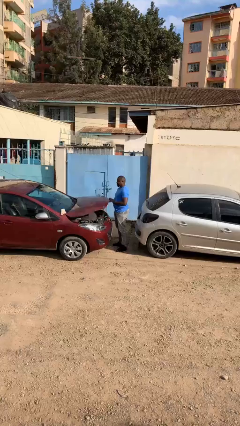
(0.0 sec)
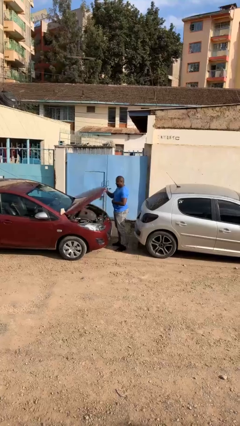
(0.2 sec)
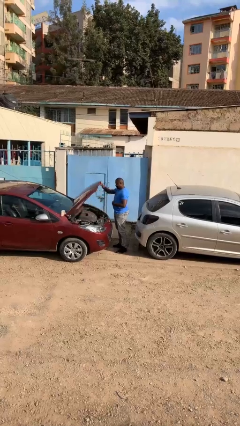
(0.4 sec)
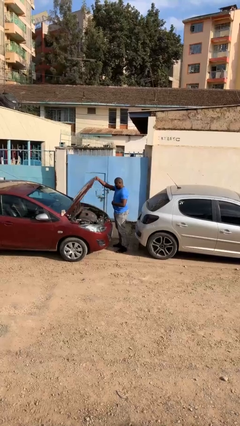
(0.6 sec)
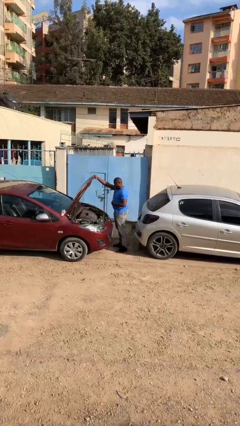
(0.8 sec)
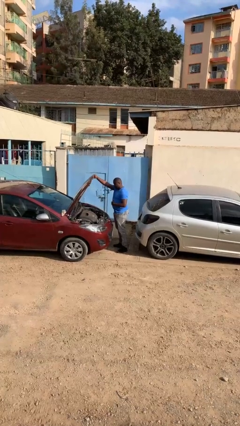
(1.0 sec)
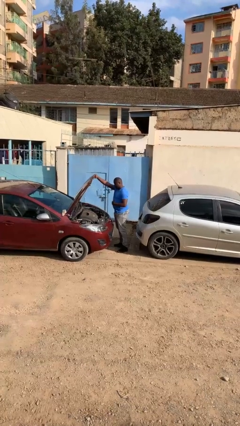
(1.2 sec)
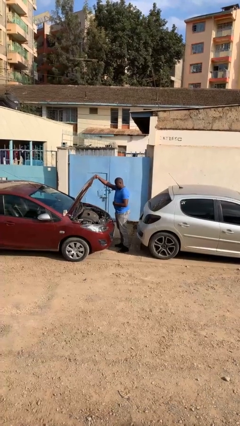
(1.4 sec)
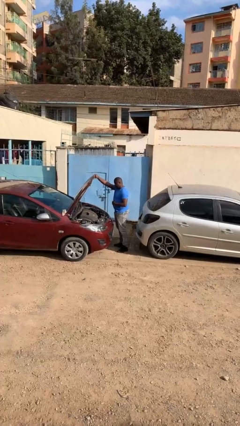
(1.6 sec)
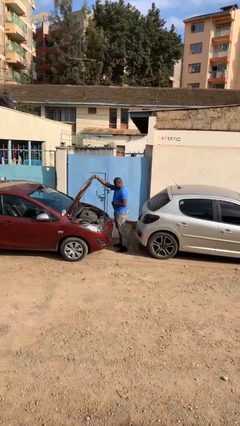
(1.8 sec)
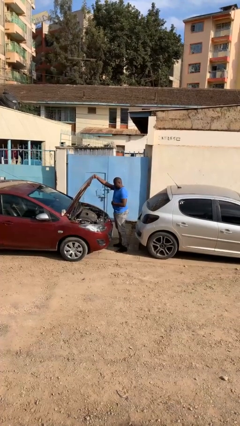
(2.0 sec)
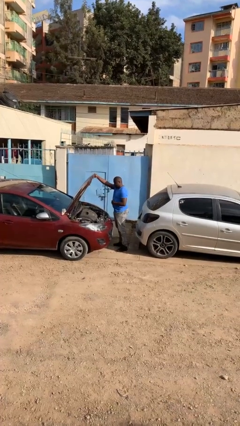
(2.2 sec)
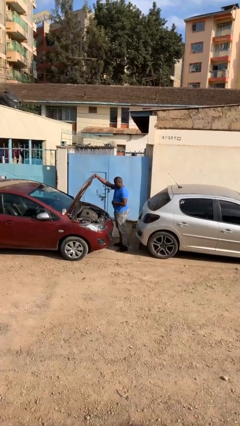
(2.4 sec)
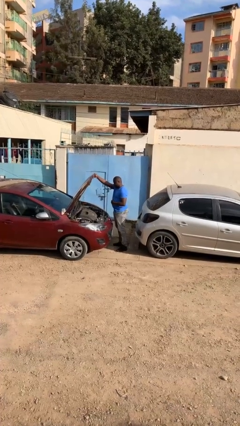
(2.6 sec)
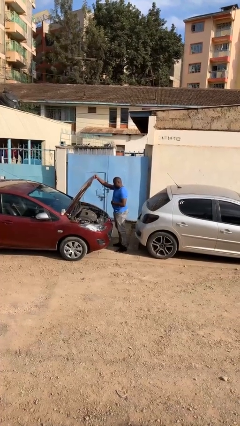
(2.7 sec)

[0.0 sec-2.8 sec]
person opens car hood

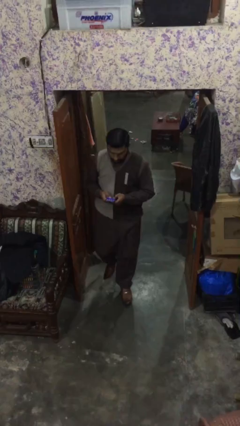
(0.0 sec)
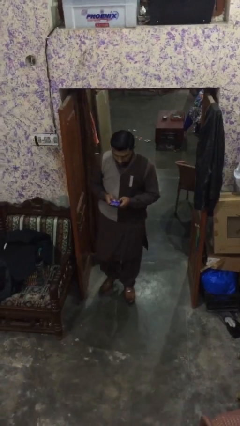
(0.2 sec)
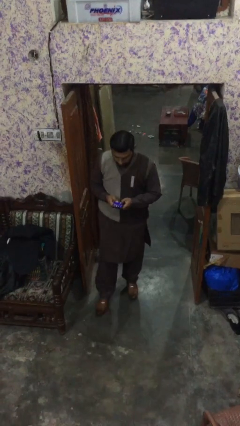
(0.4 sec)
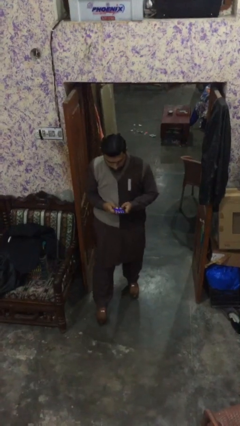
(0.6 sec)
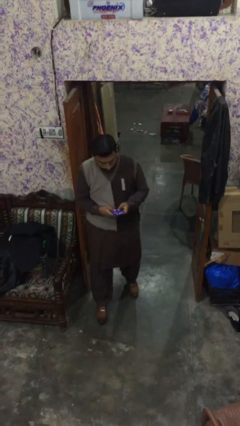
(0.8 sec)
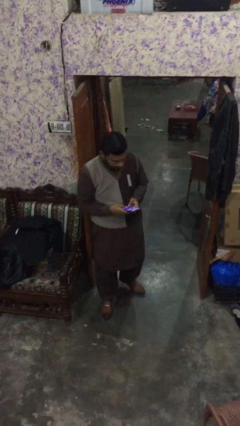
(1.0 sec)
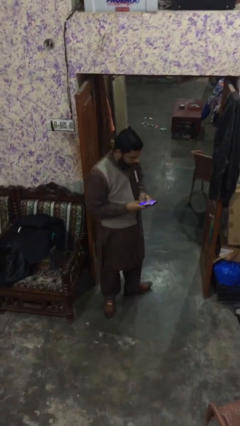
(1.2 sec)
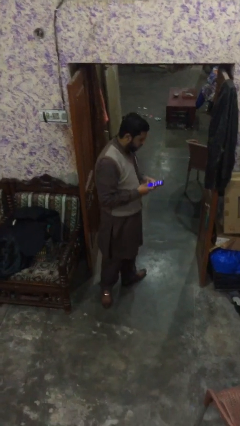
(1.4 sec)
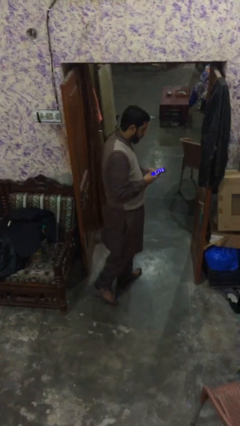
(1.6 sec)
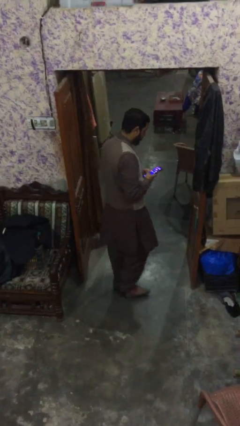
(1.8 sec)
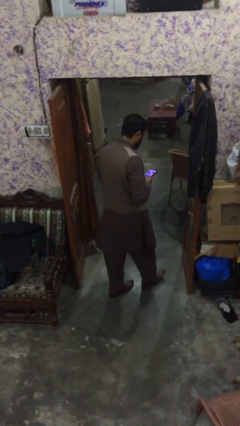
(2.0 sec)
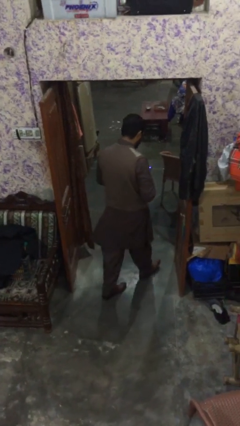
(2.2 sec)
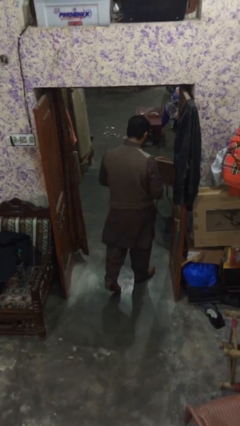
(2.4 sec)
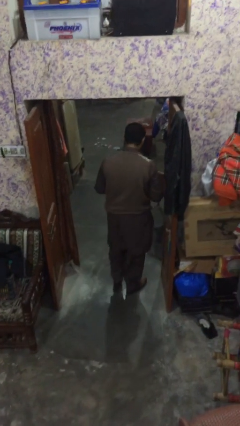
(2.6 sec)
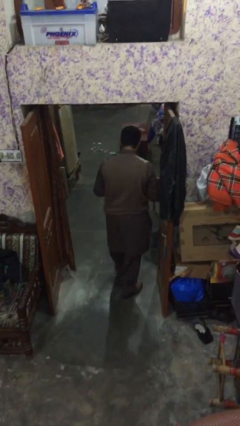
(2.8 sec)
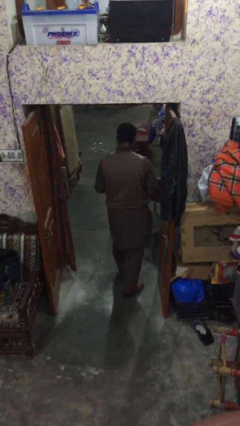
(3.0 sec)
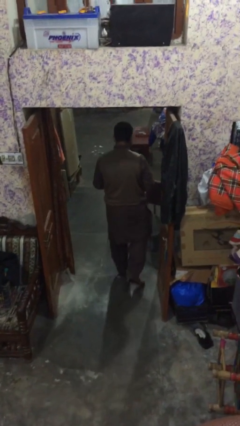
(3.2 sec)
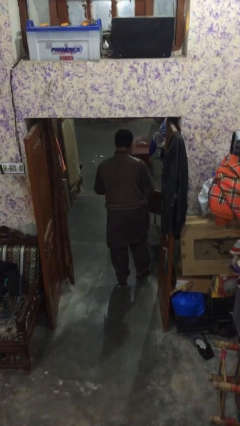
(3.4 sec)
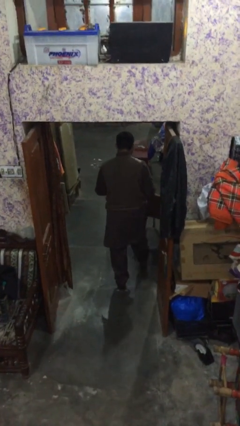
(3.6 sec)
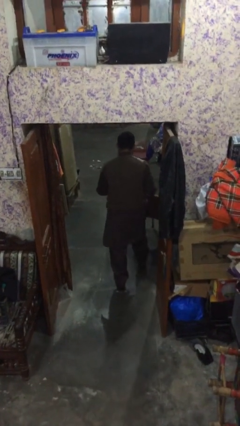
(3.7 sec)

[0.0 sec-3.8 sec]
person exits scene through structure

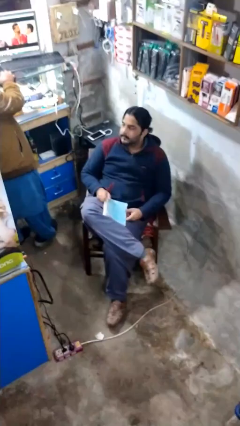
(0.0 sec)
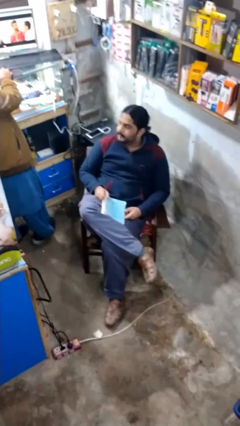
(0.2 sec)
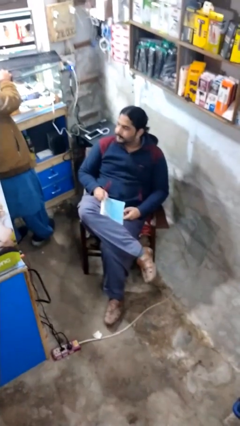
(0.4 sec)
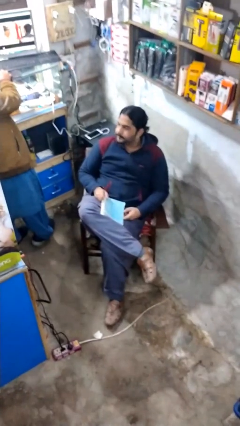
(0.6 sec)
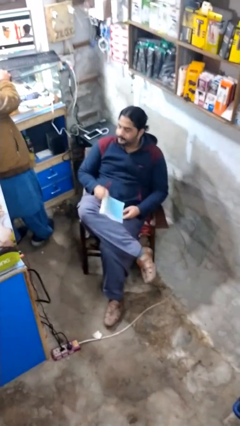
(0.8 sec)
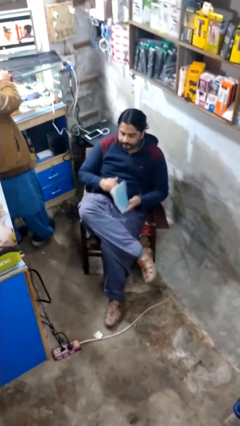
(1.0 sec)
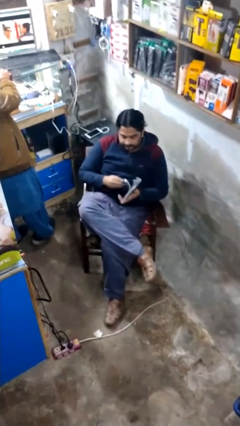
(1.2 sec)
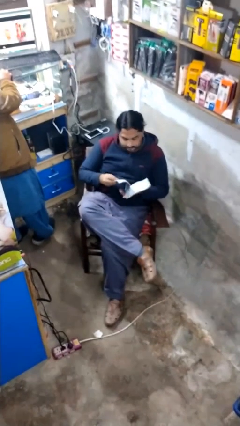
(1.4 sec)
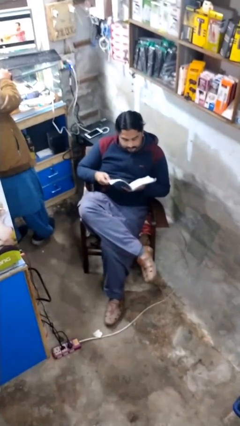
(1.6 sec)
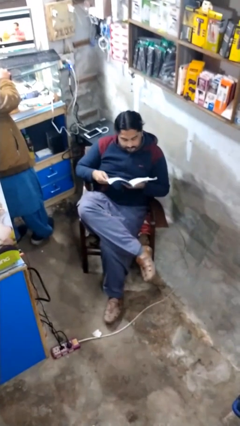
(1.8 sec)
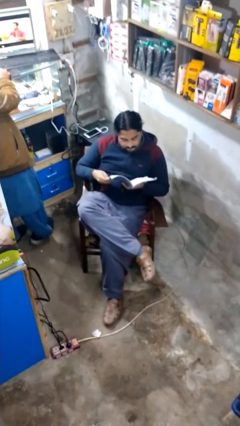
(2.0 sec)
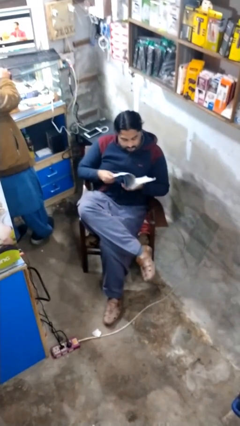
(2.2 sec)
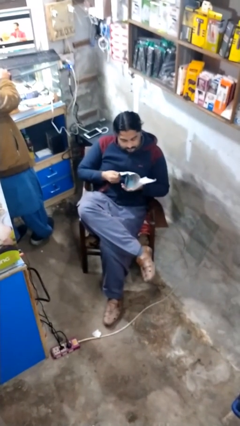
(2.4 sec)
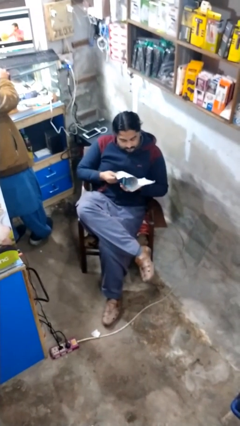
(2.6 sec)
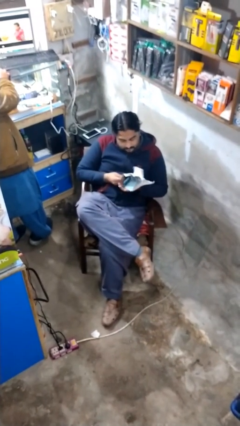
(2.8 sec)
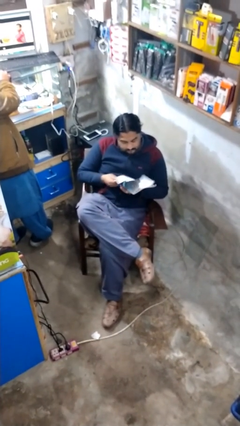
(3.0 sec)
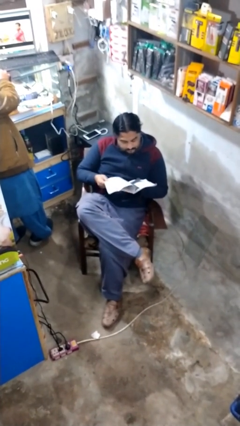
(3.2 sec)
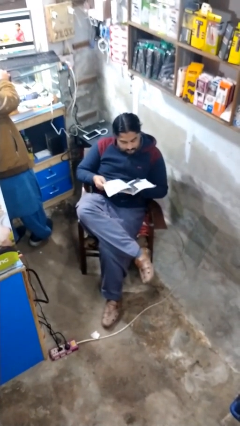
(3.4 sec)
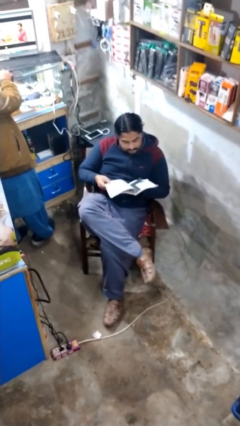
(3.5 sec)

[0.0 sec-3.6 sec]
person reads document

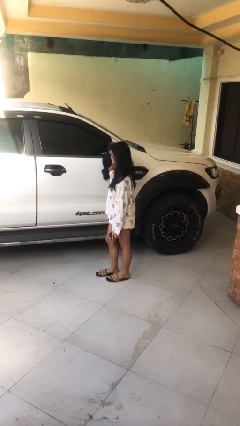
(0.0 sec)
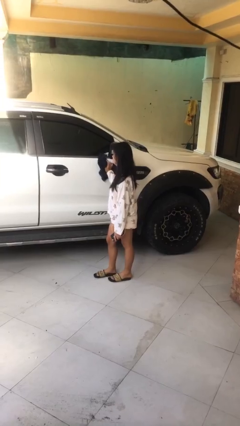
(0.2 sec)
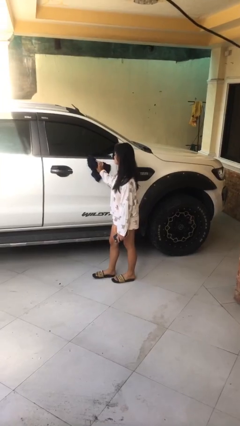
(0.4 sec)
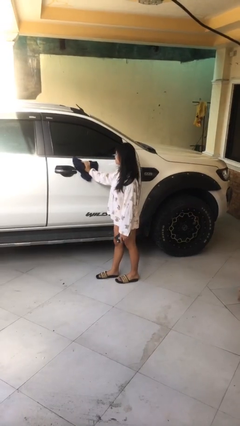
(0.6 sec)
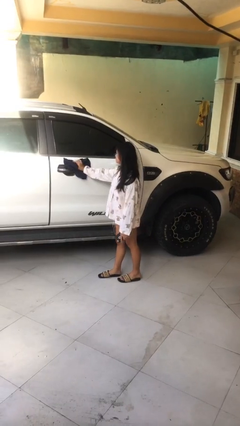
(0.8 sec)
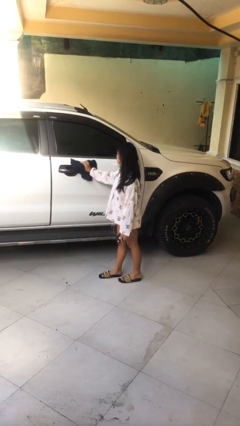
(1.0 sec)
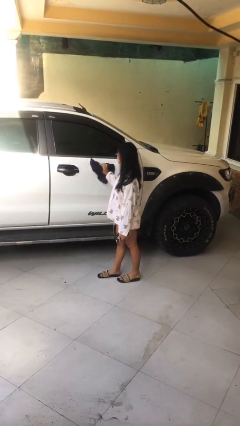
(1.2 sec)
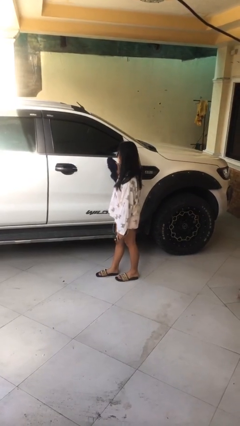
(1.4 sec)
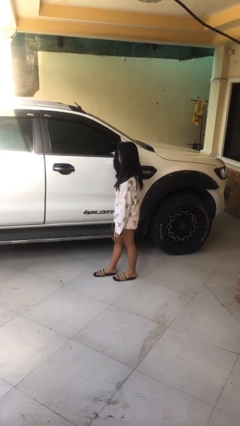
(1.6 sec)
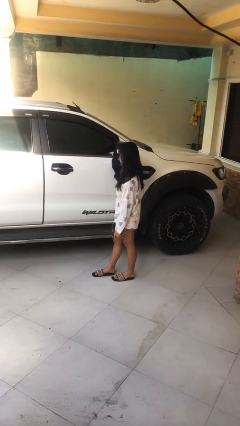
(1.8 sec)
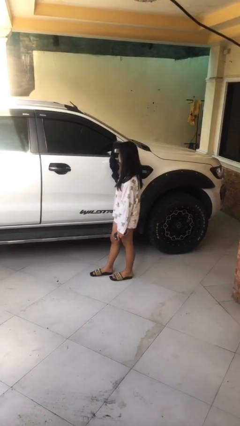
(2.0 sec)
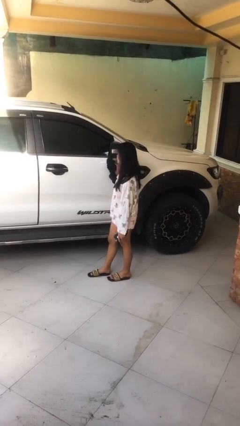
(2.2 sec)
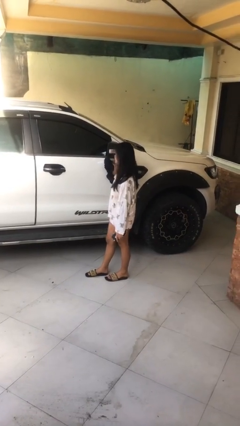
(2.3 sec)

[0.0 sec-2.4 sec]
person polishes car with rag

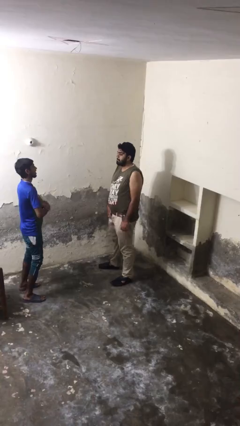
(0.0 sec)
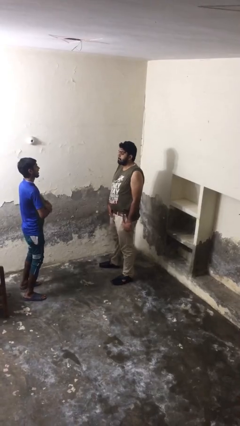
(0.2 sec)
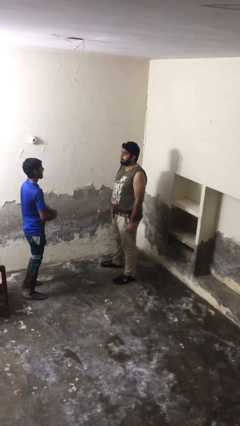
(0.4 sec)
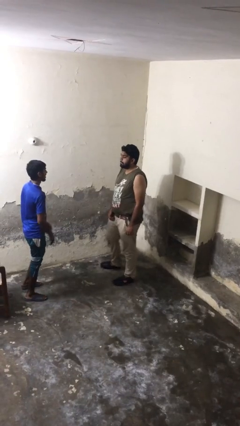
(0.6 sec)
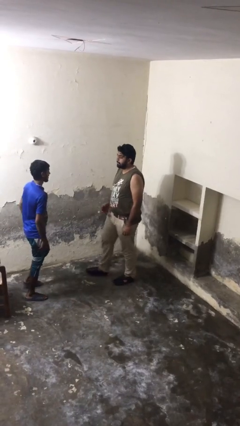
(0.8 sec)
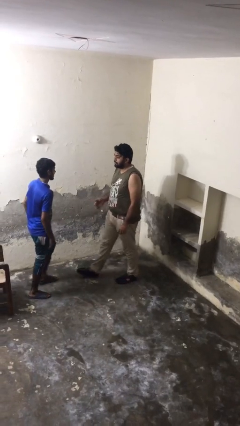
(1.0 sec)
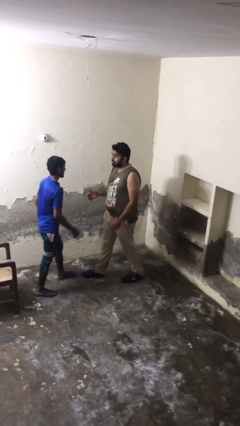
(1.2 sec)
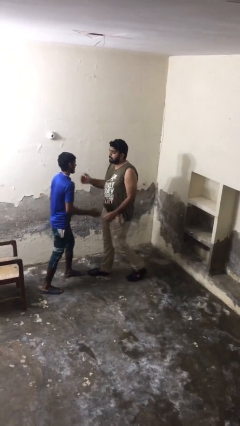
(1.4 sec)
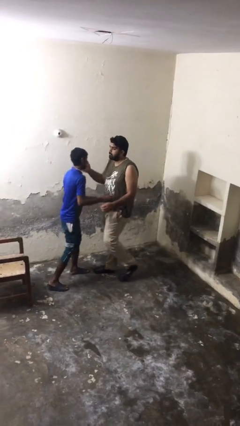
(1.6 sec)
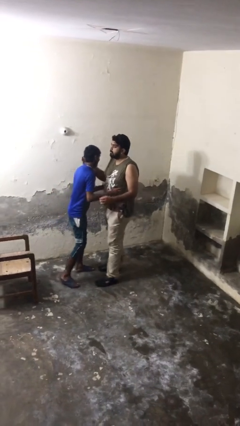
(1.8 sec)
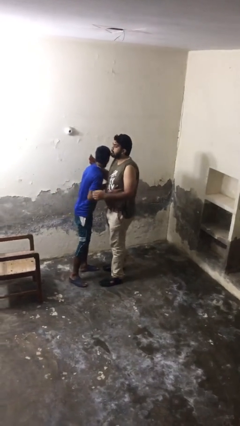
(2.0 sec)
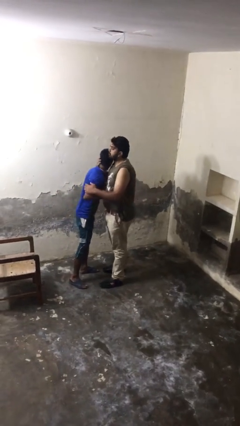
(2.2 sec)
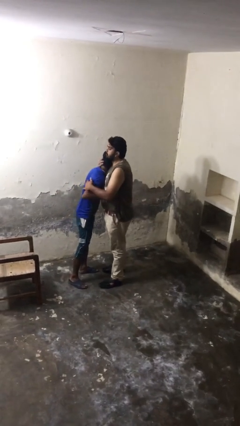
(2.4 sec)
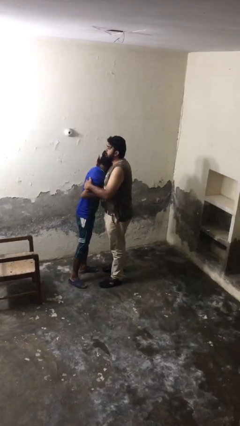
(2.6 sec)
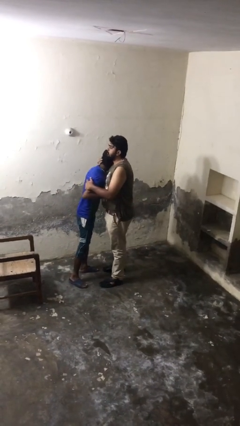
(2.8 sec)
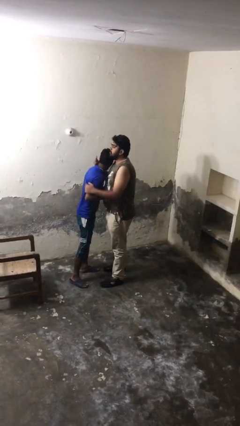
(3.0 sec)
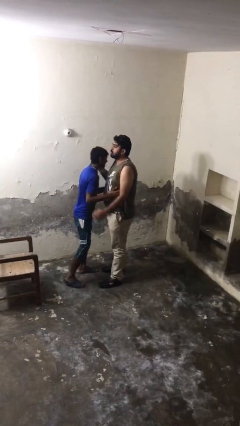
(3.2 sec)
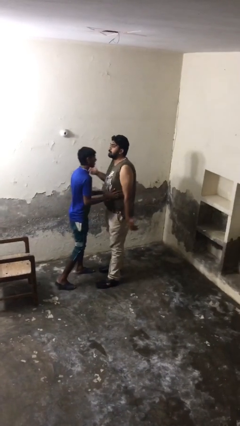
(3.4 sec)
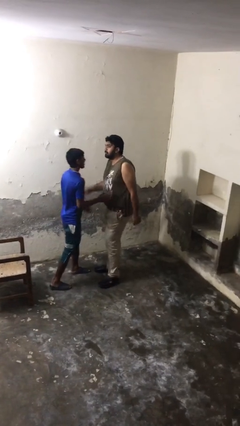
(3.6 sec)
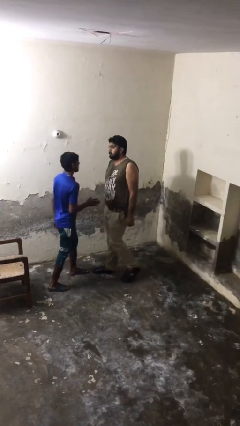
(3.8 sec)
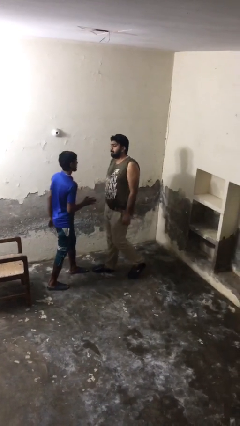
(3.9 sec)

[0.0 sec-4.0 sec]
person embraces person

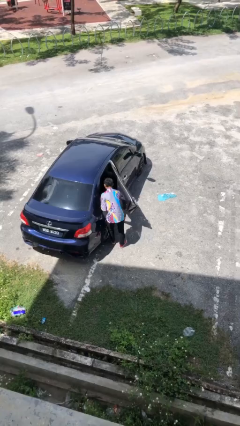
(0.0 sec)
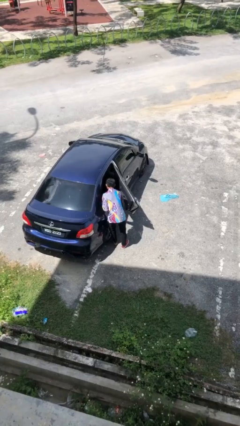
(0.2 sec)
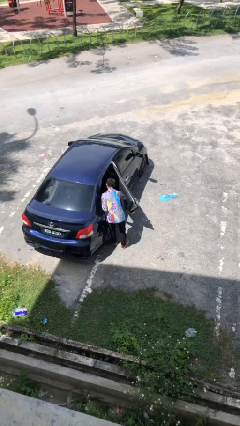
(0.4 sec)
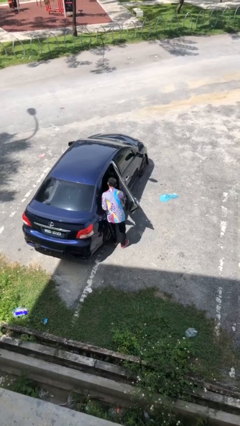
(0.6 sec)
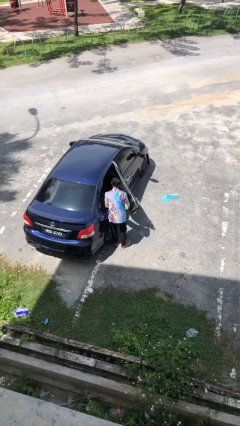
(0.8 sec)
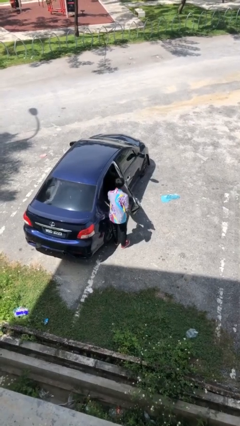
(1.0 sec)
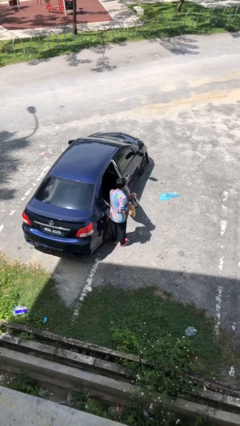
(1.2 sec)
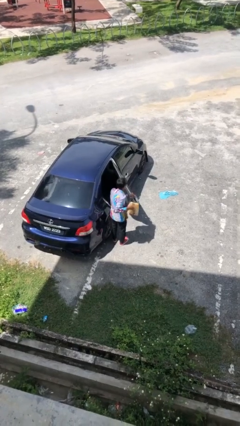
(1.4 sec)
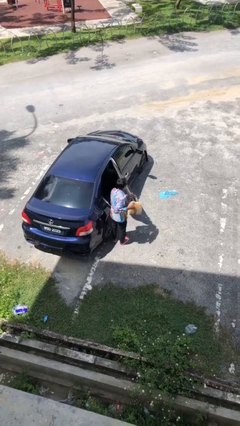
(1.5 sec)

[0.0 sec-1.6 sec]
person unloads car
